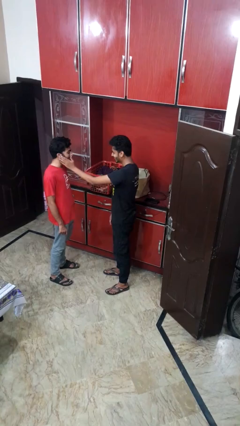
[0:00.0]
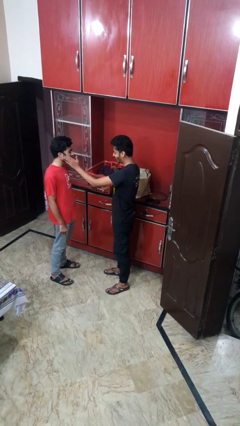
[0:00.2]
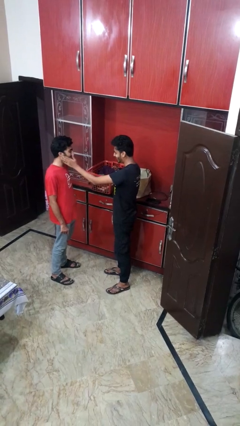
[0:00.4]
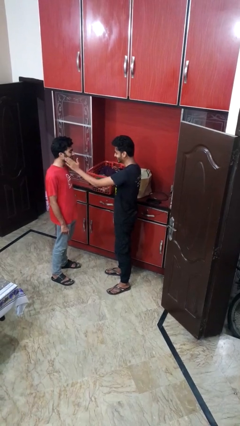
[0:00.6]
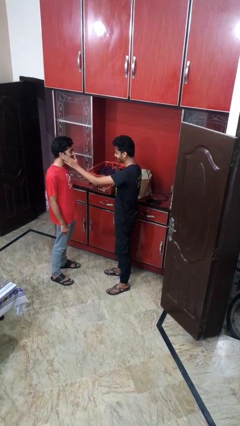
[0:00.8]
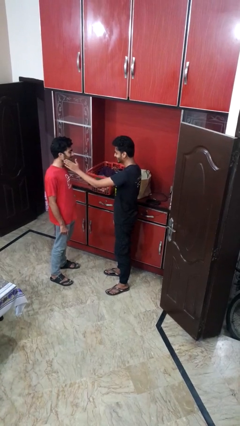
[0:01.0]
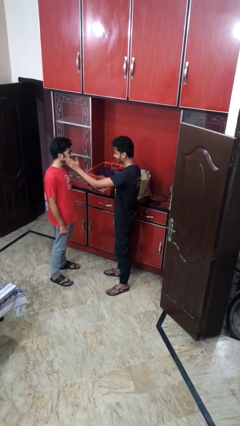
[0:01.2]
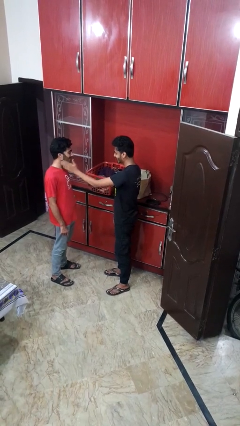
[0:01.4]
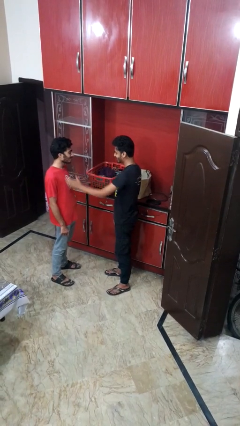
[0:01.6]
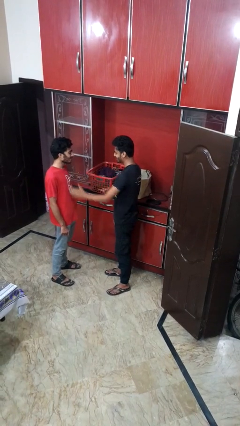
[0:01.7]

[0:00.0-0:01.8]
person touches face of person

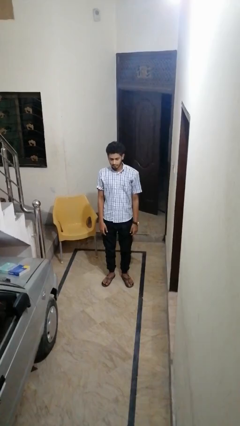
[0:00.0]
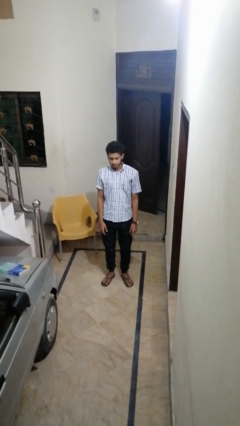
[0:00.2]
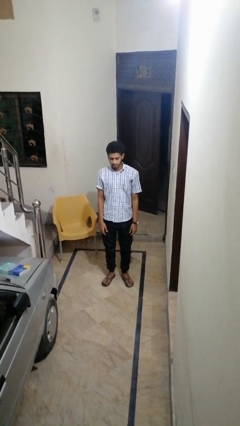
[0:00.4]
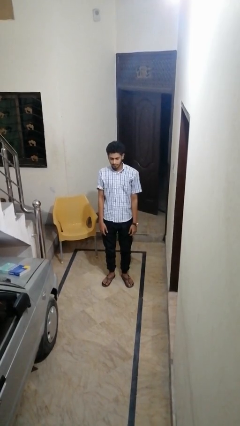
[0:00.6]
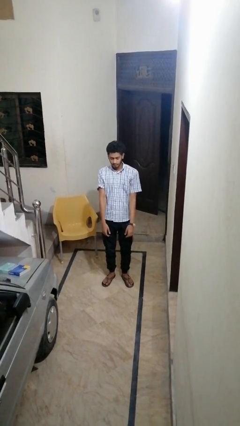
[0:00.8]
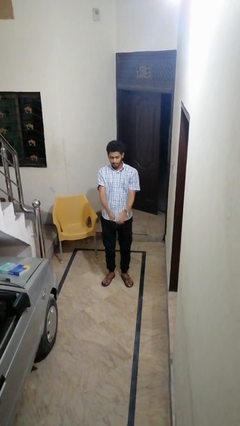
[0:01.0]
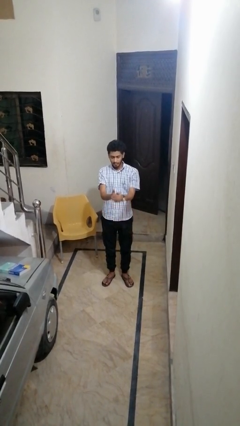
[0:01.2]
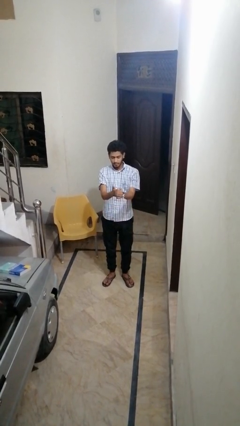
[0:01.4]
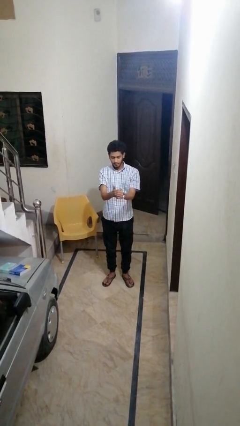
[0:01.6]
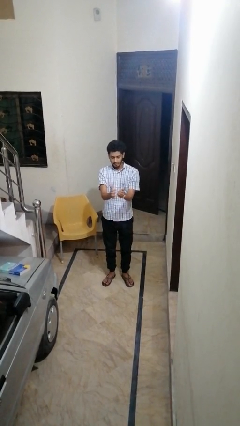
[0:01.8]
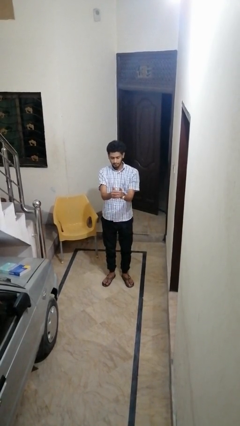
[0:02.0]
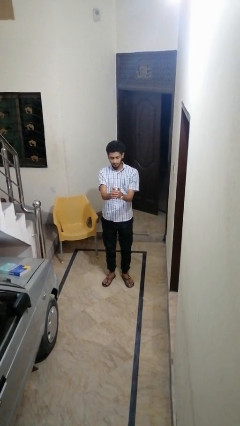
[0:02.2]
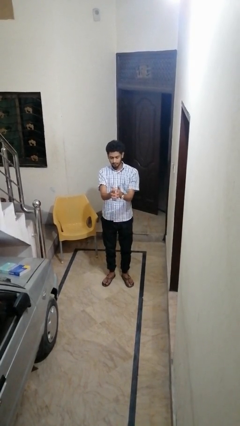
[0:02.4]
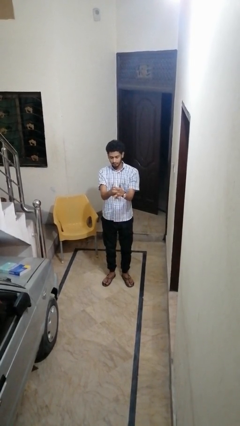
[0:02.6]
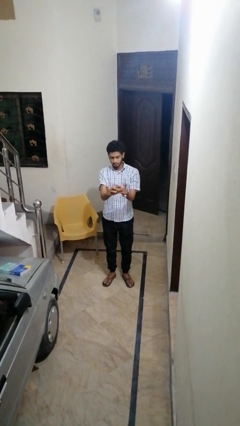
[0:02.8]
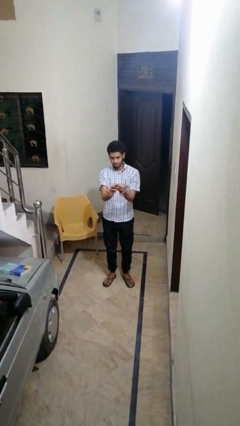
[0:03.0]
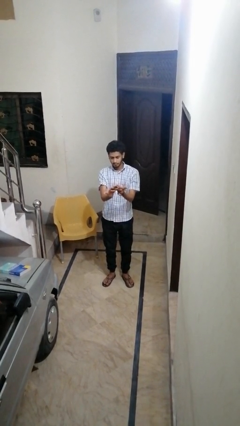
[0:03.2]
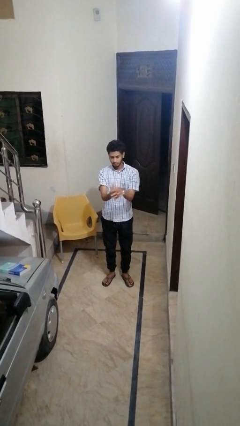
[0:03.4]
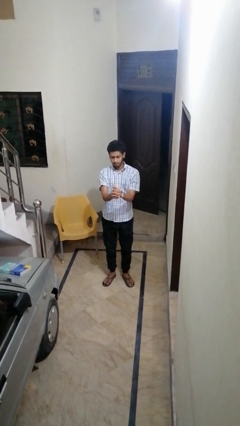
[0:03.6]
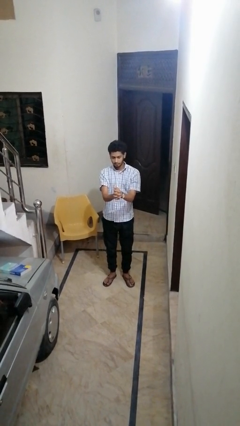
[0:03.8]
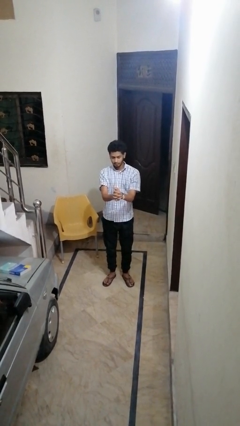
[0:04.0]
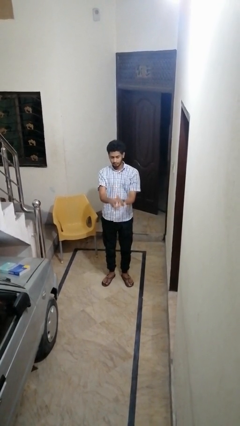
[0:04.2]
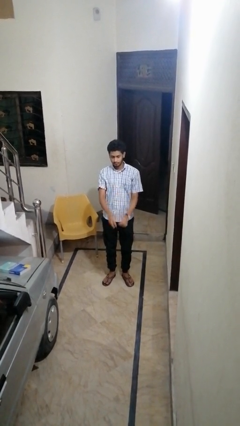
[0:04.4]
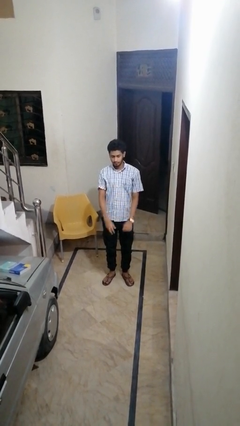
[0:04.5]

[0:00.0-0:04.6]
person cracks knuckles

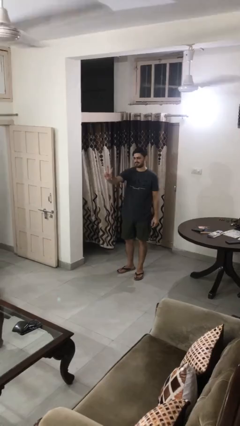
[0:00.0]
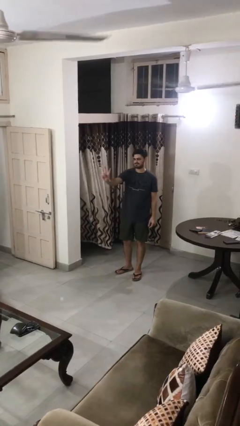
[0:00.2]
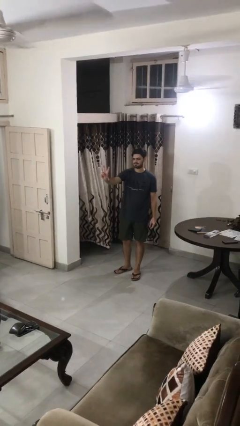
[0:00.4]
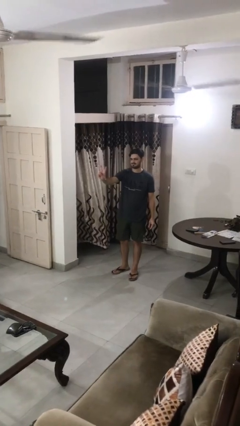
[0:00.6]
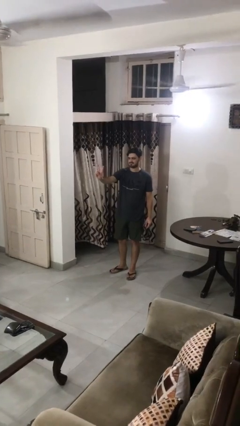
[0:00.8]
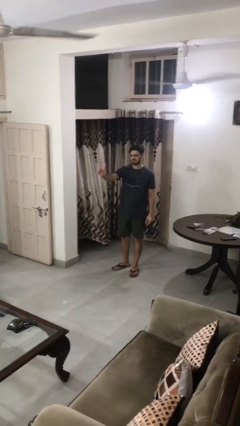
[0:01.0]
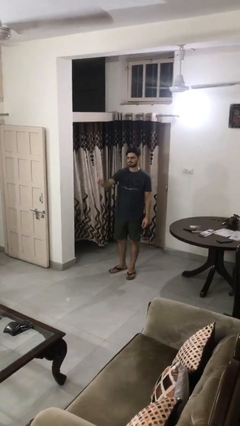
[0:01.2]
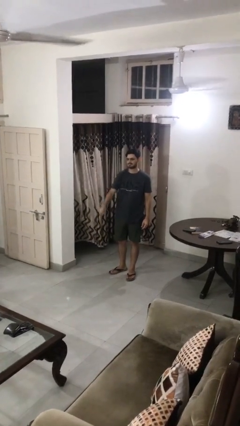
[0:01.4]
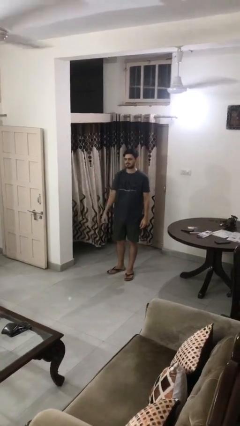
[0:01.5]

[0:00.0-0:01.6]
person gestures peace

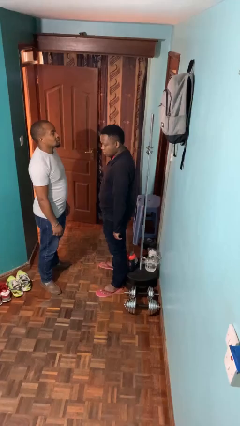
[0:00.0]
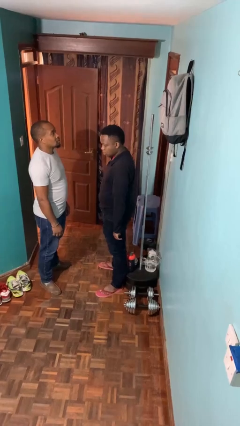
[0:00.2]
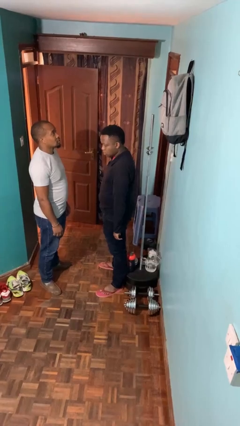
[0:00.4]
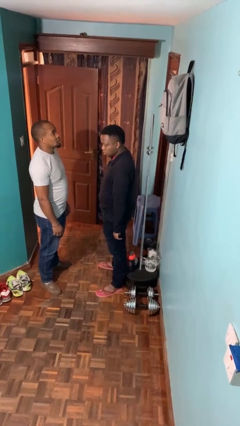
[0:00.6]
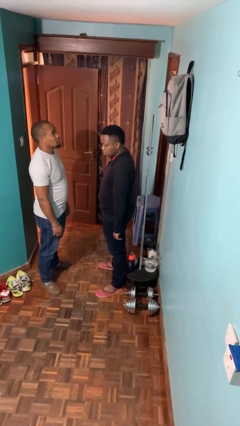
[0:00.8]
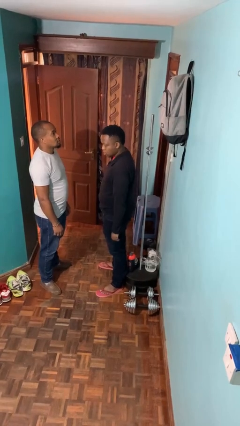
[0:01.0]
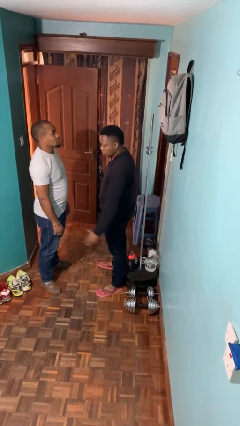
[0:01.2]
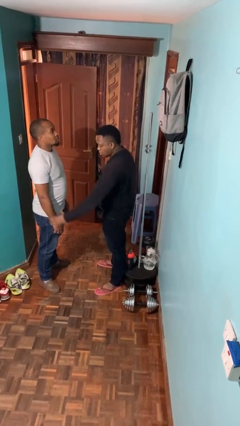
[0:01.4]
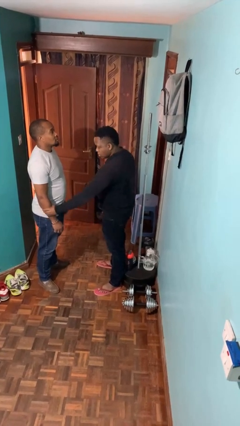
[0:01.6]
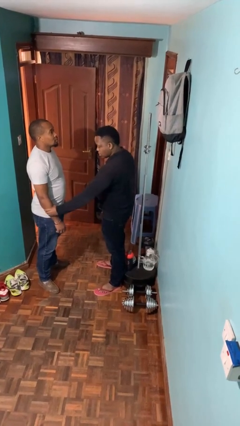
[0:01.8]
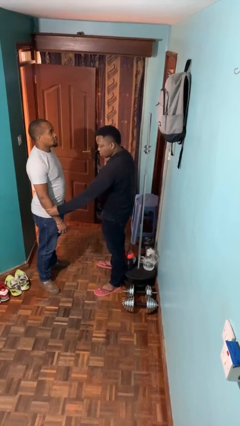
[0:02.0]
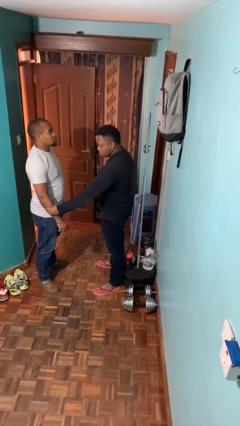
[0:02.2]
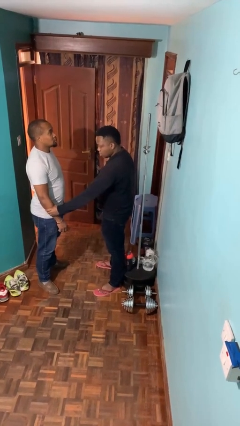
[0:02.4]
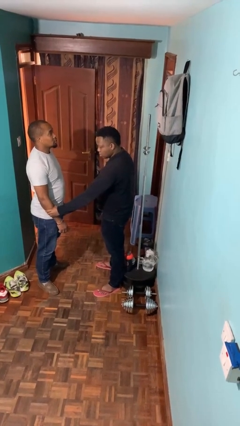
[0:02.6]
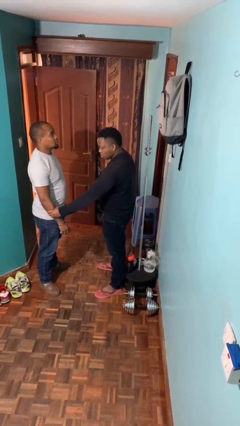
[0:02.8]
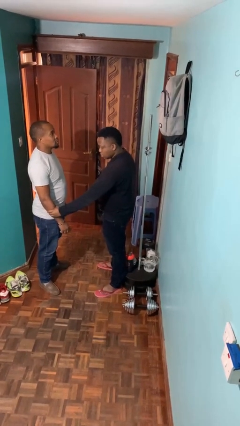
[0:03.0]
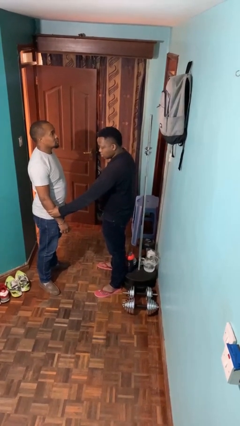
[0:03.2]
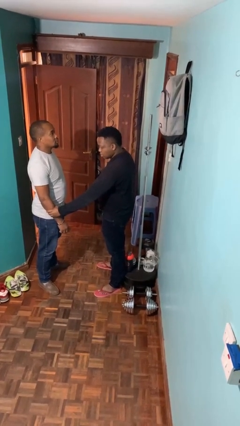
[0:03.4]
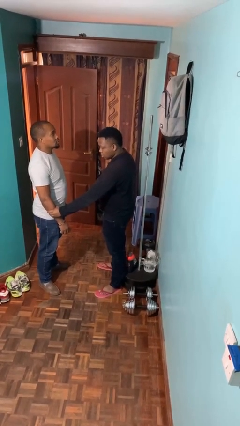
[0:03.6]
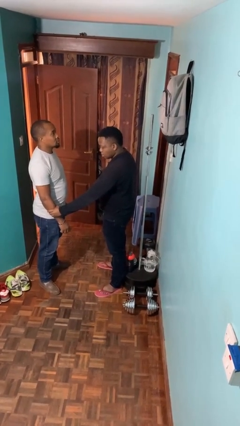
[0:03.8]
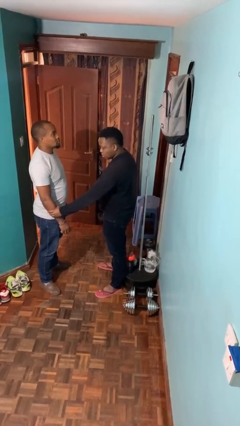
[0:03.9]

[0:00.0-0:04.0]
person grabs person by forearm

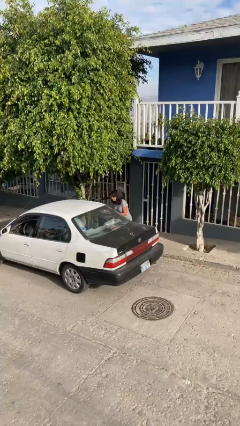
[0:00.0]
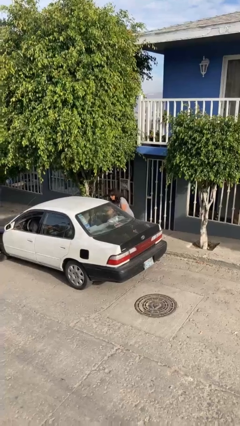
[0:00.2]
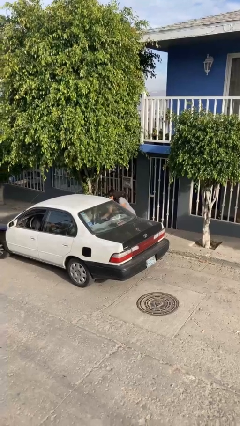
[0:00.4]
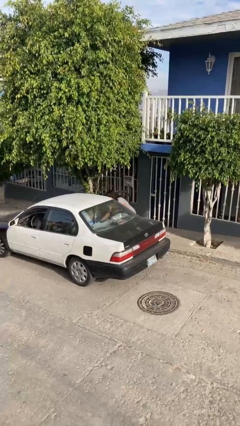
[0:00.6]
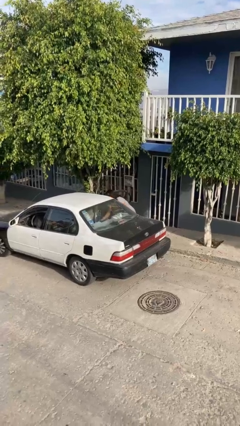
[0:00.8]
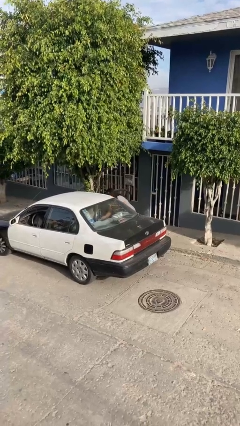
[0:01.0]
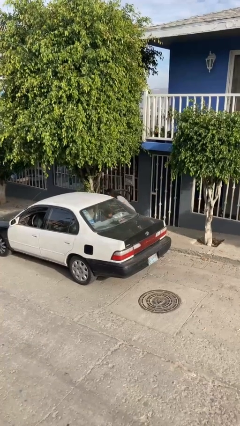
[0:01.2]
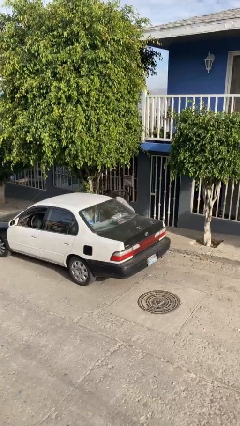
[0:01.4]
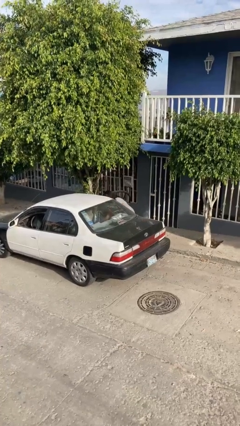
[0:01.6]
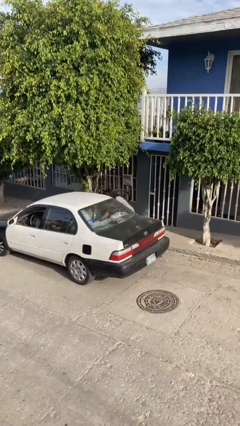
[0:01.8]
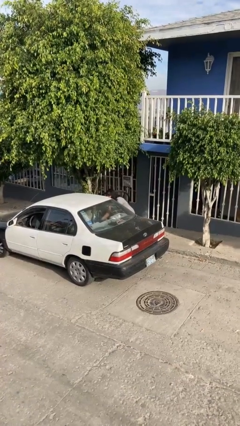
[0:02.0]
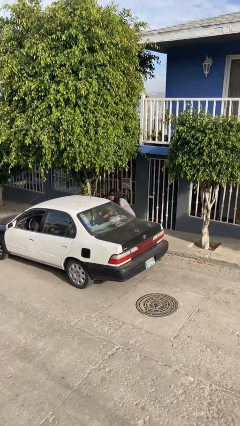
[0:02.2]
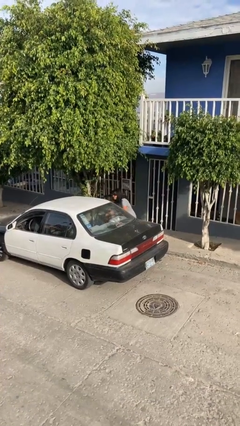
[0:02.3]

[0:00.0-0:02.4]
person loads car

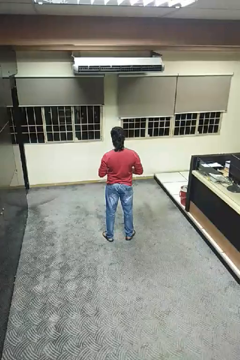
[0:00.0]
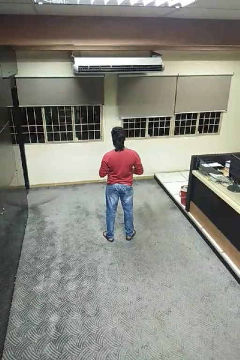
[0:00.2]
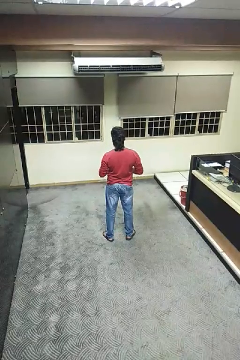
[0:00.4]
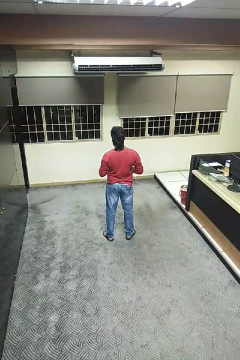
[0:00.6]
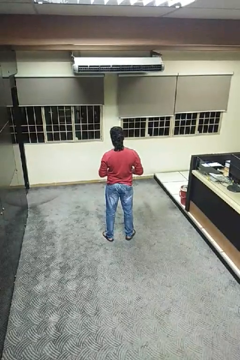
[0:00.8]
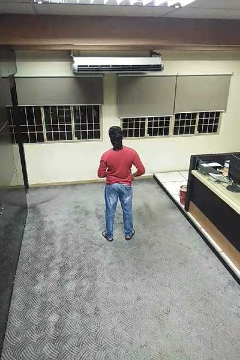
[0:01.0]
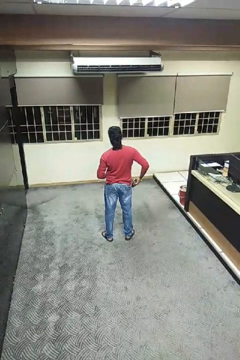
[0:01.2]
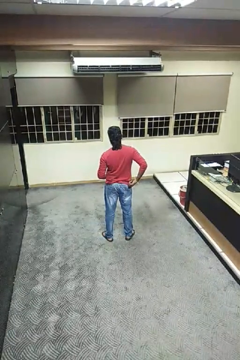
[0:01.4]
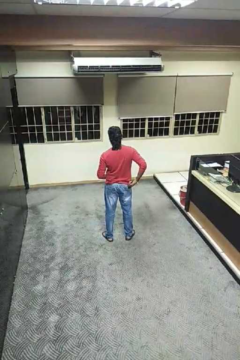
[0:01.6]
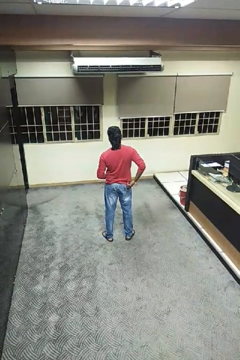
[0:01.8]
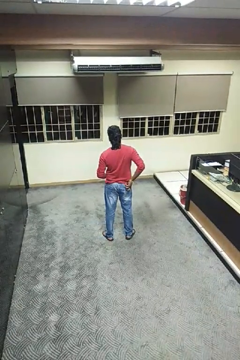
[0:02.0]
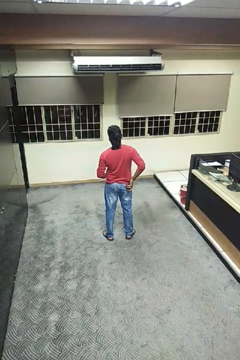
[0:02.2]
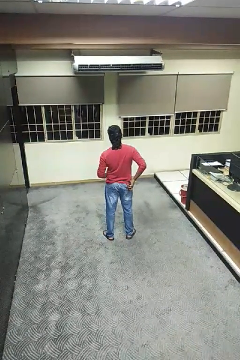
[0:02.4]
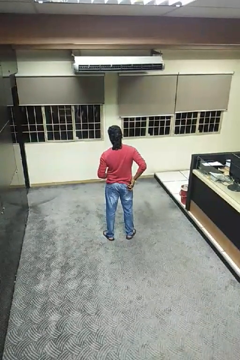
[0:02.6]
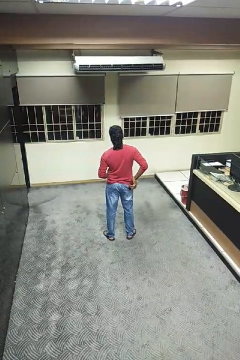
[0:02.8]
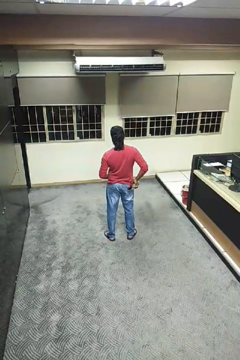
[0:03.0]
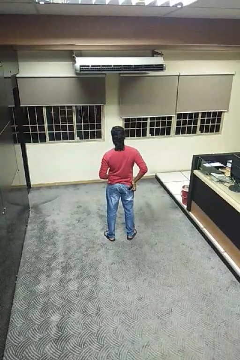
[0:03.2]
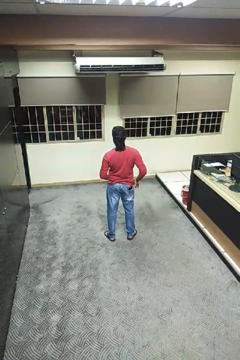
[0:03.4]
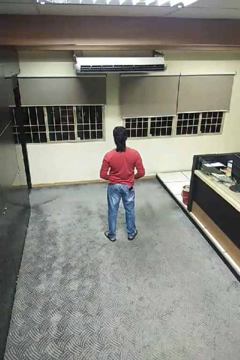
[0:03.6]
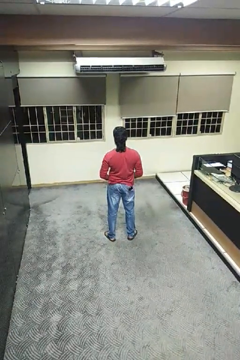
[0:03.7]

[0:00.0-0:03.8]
person puts phone into pocket
